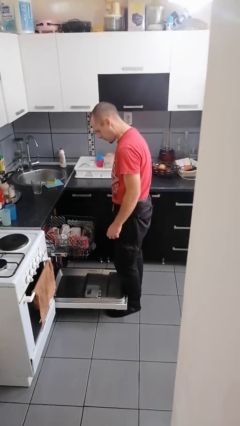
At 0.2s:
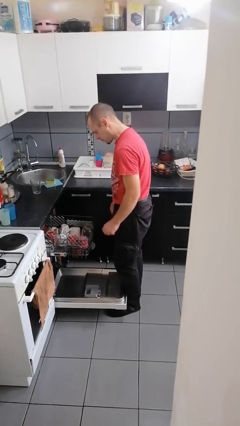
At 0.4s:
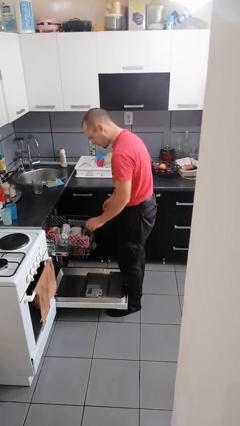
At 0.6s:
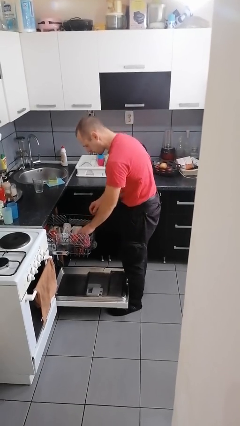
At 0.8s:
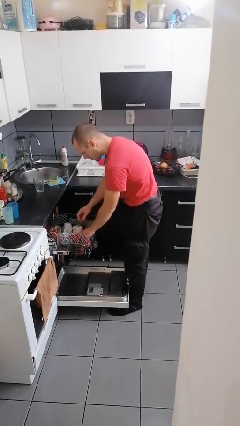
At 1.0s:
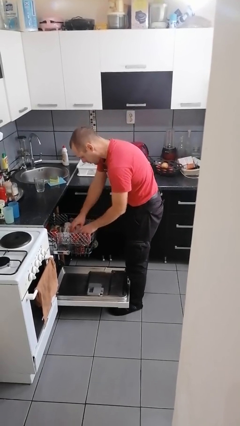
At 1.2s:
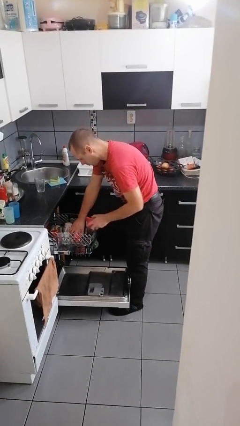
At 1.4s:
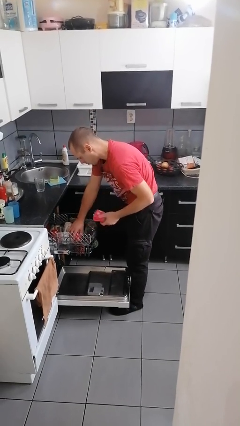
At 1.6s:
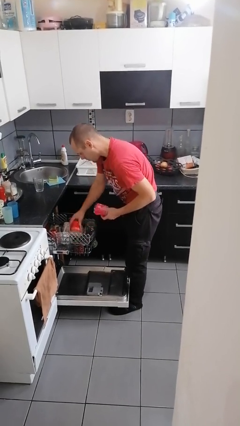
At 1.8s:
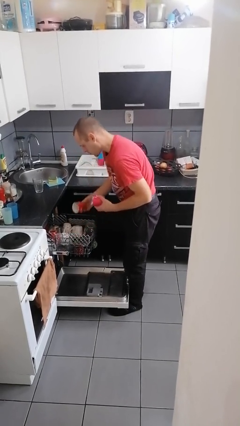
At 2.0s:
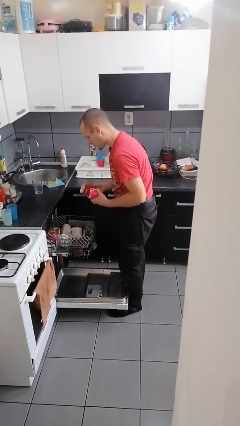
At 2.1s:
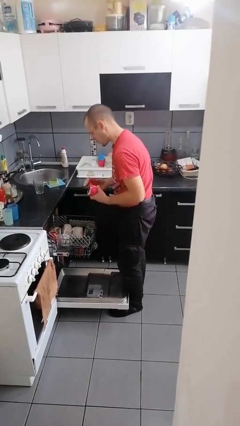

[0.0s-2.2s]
person unloads dishwasher

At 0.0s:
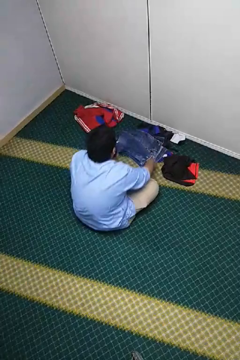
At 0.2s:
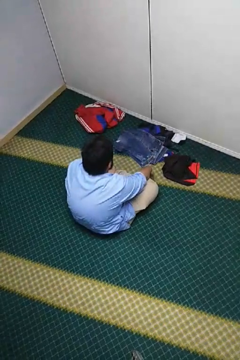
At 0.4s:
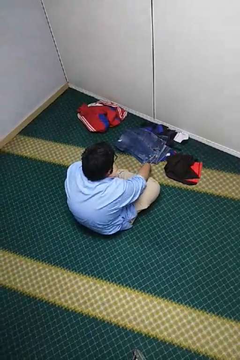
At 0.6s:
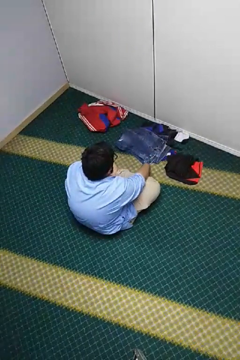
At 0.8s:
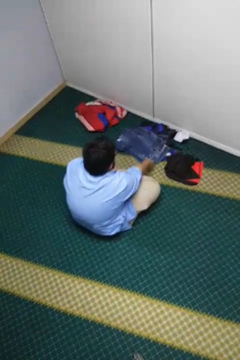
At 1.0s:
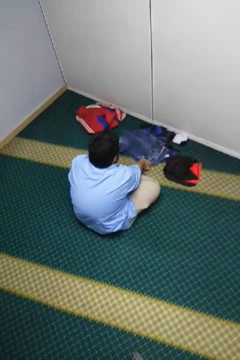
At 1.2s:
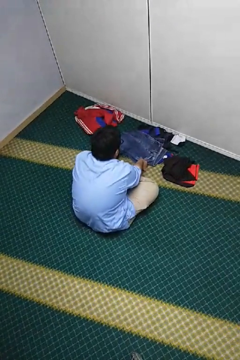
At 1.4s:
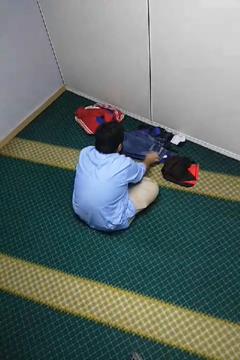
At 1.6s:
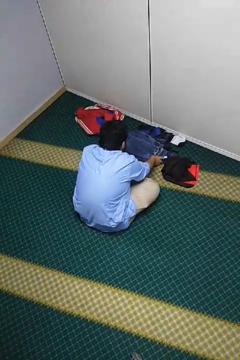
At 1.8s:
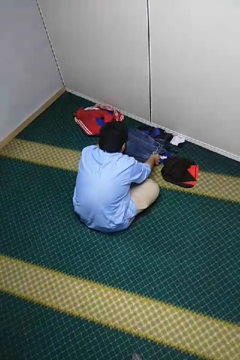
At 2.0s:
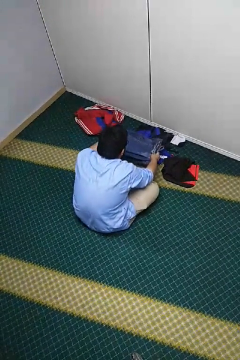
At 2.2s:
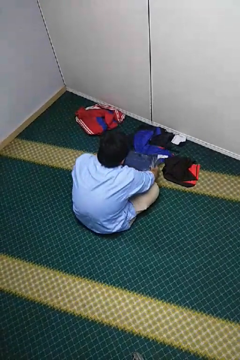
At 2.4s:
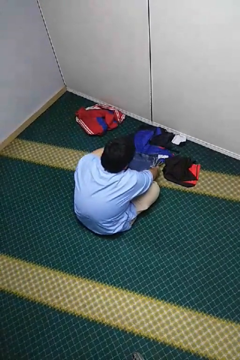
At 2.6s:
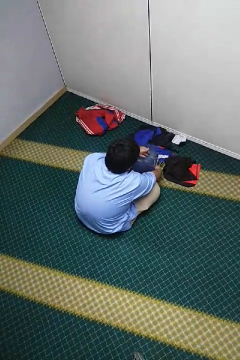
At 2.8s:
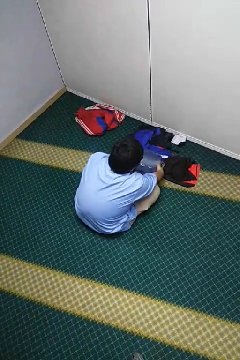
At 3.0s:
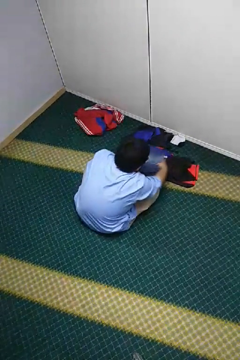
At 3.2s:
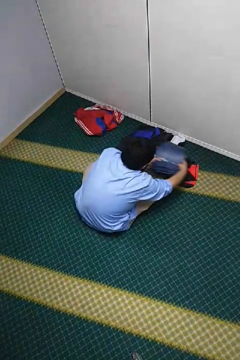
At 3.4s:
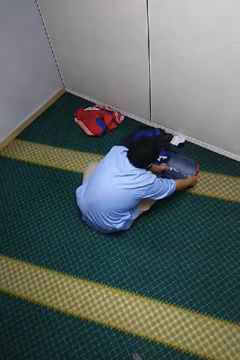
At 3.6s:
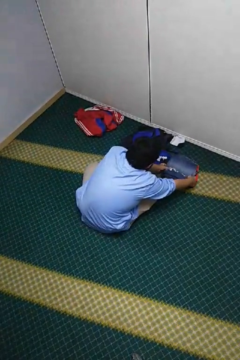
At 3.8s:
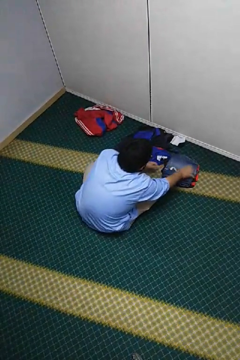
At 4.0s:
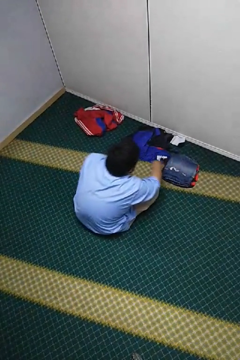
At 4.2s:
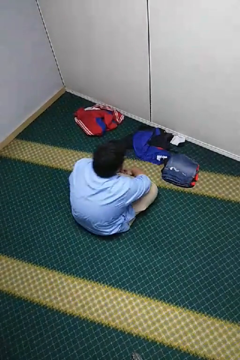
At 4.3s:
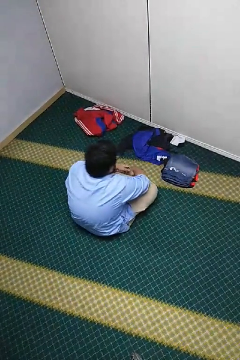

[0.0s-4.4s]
person folds pants

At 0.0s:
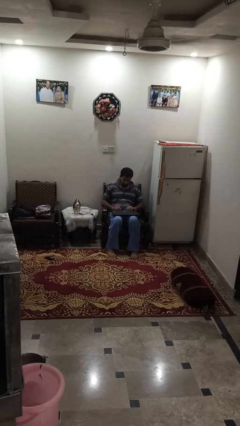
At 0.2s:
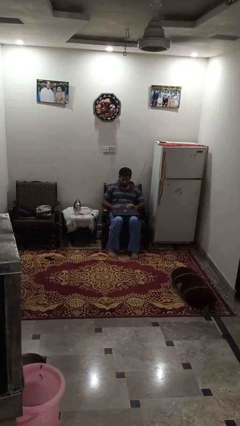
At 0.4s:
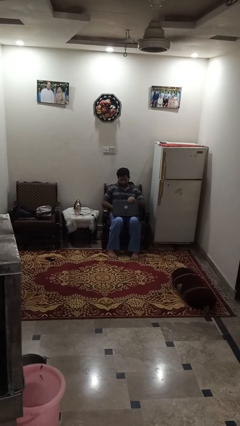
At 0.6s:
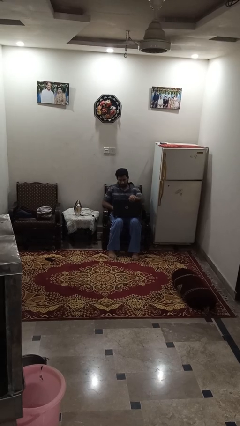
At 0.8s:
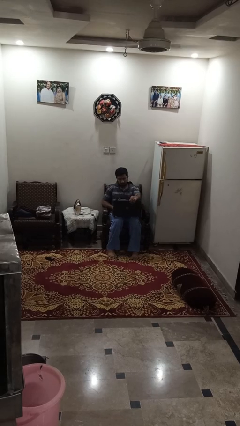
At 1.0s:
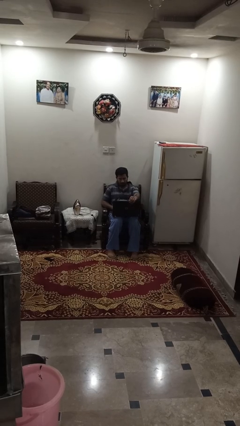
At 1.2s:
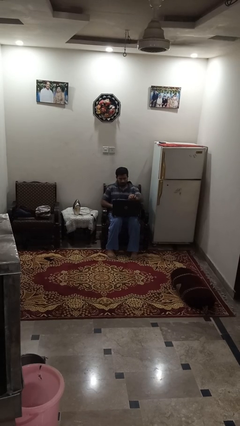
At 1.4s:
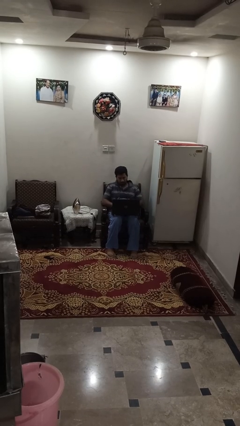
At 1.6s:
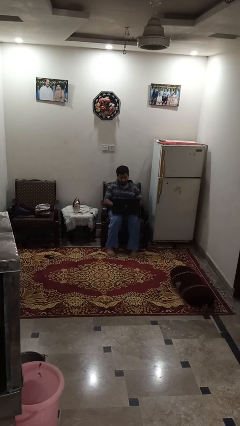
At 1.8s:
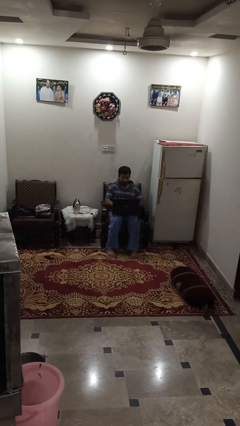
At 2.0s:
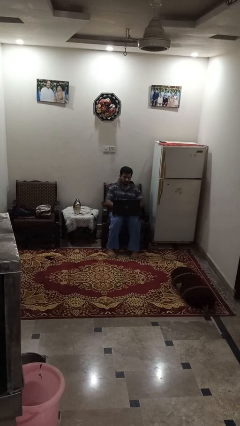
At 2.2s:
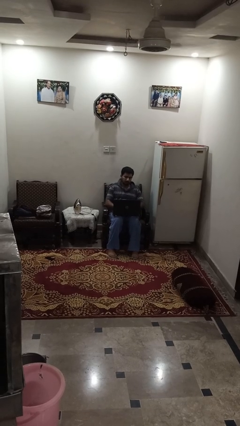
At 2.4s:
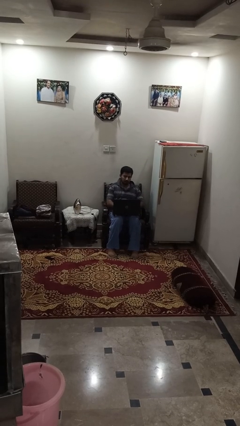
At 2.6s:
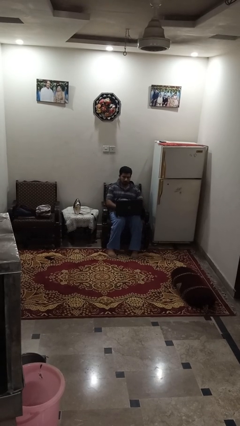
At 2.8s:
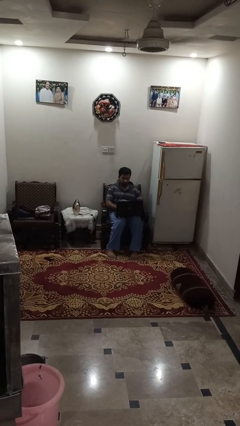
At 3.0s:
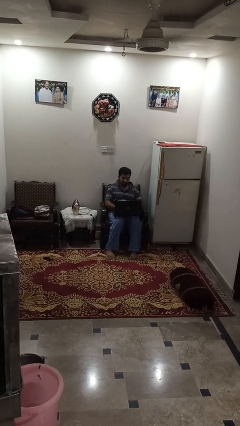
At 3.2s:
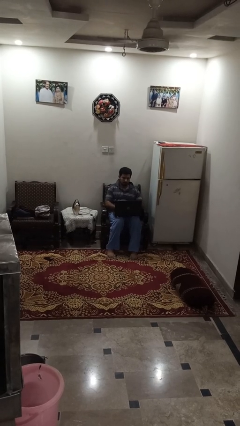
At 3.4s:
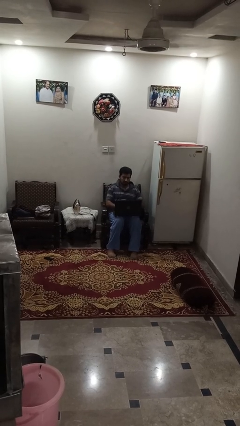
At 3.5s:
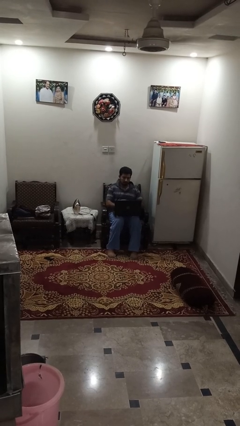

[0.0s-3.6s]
person opens laptop

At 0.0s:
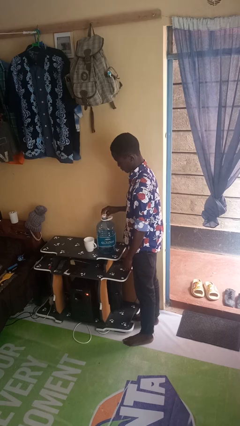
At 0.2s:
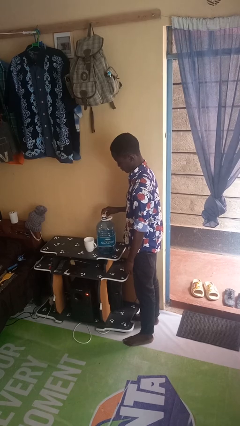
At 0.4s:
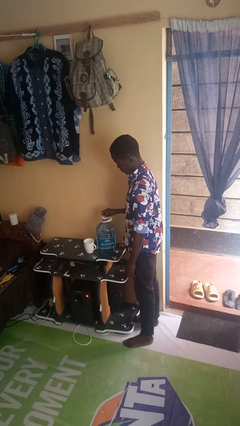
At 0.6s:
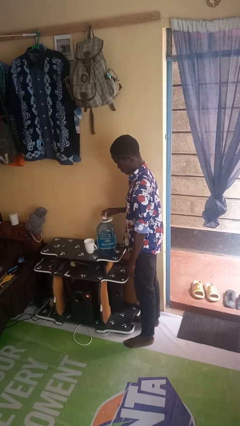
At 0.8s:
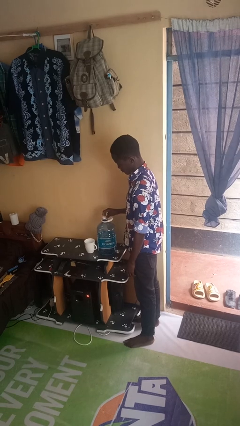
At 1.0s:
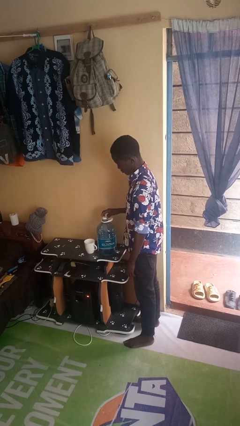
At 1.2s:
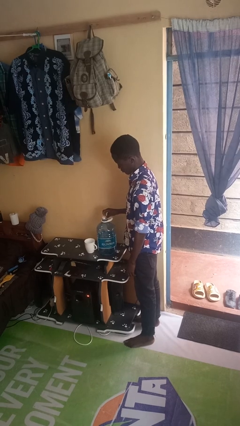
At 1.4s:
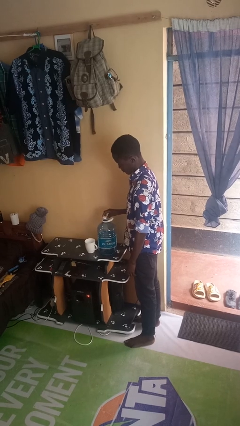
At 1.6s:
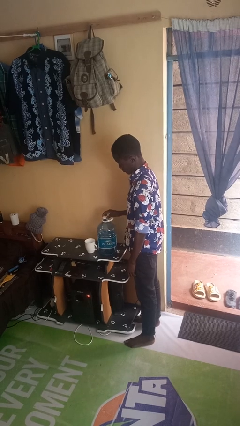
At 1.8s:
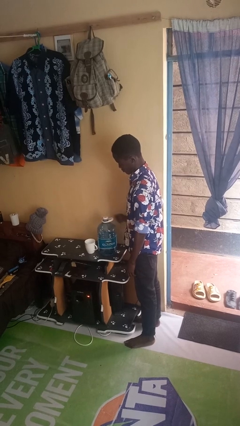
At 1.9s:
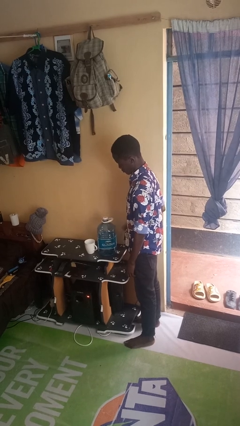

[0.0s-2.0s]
person screws lid to bottle

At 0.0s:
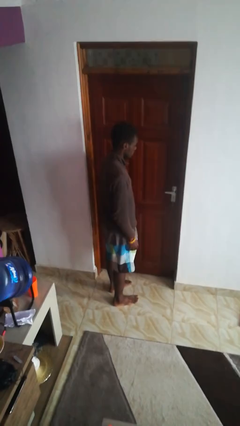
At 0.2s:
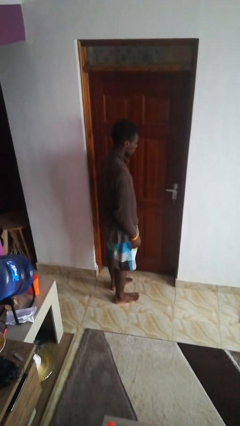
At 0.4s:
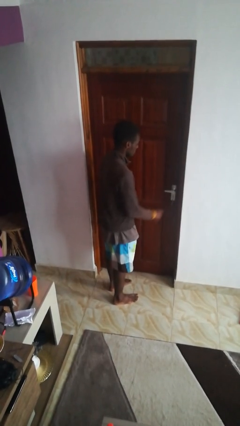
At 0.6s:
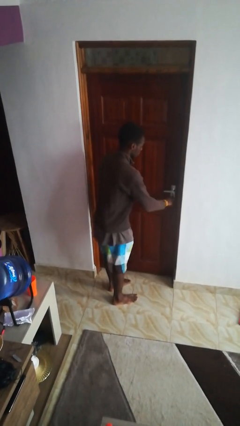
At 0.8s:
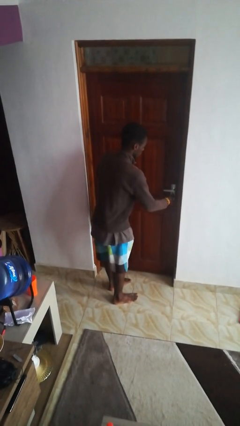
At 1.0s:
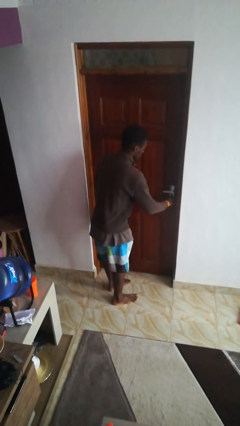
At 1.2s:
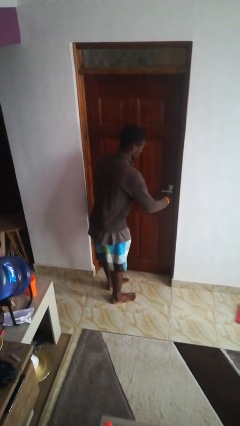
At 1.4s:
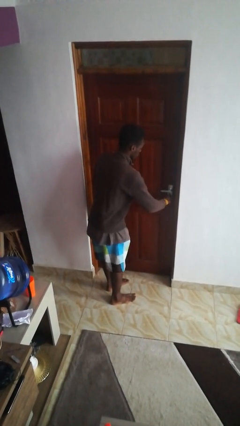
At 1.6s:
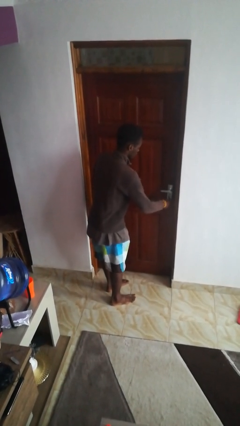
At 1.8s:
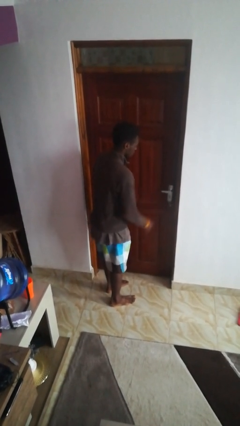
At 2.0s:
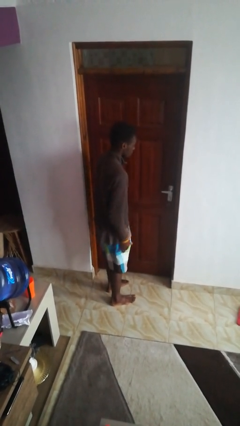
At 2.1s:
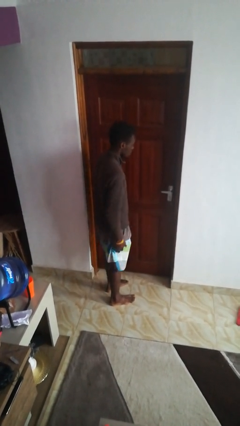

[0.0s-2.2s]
person locks door with keys

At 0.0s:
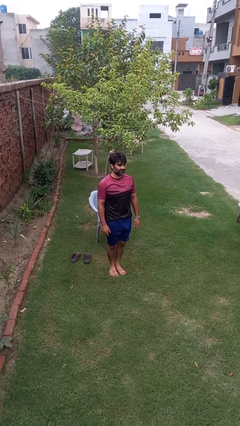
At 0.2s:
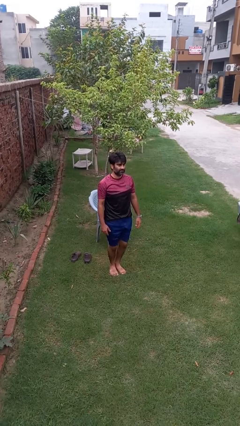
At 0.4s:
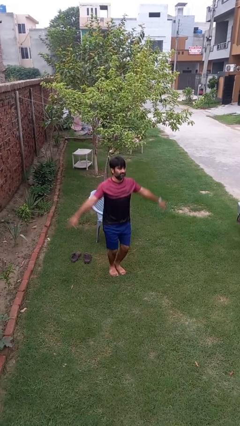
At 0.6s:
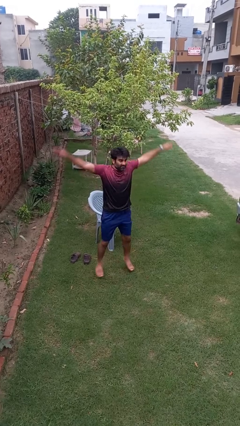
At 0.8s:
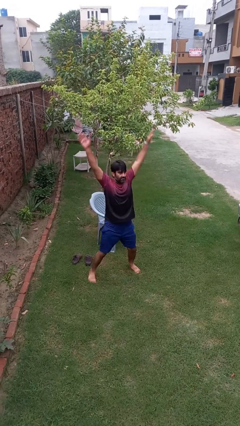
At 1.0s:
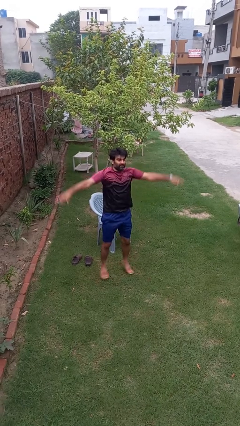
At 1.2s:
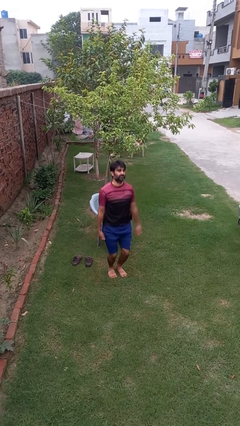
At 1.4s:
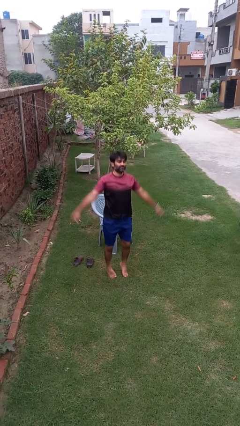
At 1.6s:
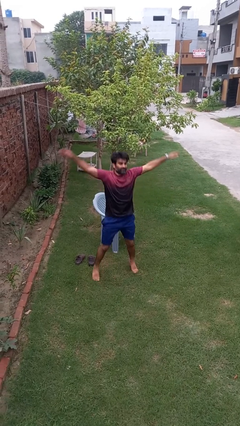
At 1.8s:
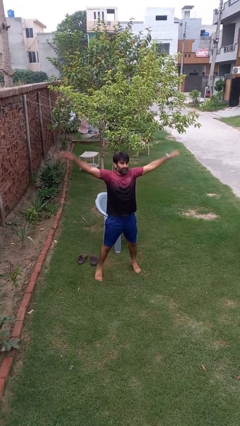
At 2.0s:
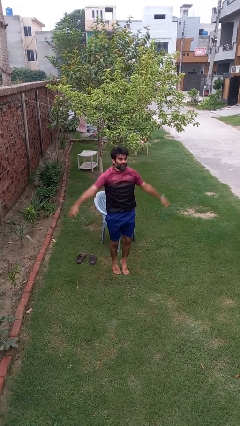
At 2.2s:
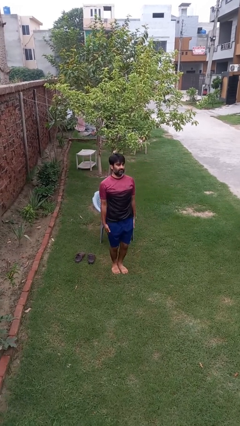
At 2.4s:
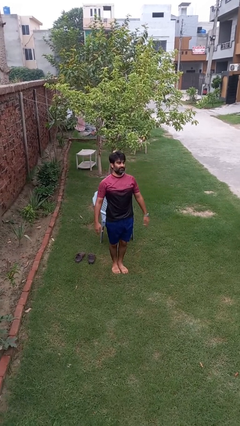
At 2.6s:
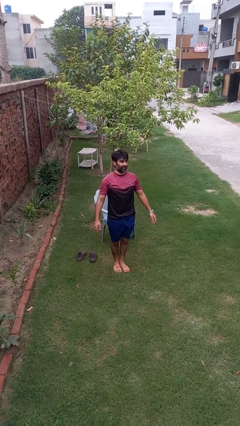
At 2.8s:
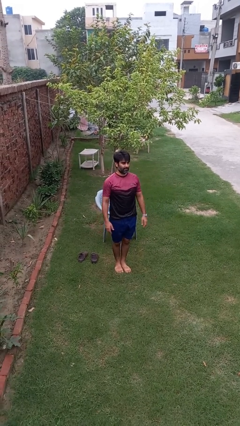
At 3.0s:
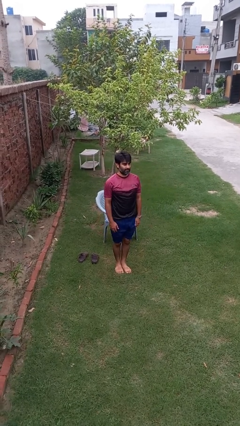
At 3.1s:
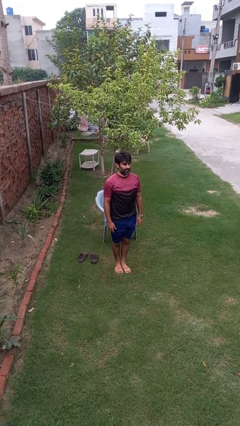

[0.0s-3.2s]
person exercises with jumping jacks

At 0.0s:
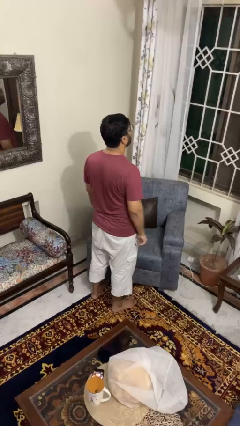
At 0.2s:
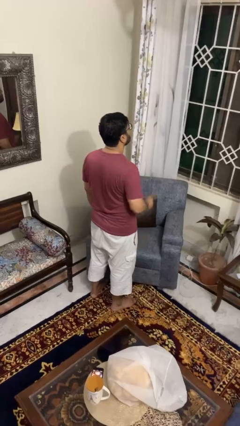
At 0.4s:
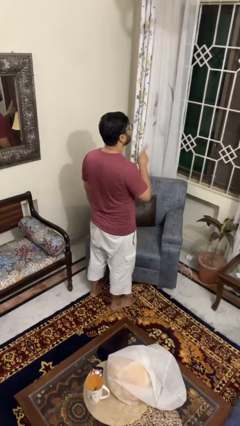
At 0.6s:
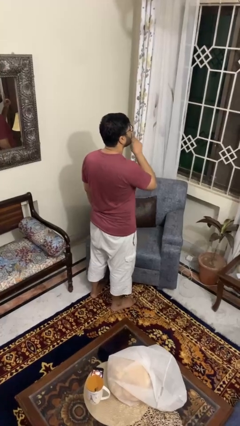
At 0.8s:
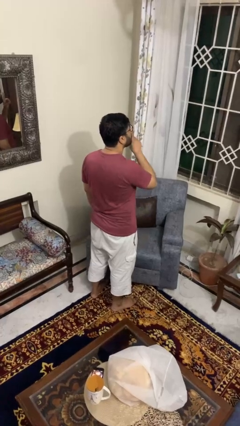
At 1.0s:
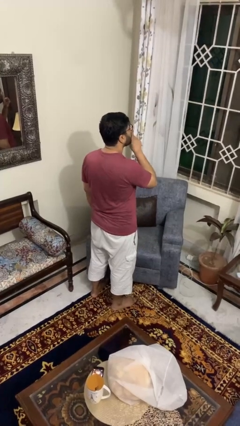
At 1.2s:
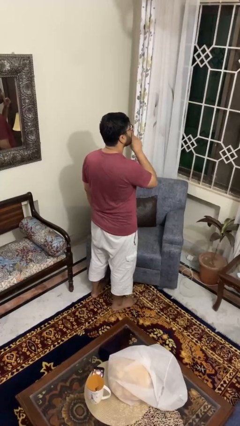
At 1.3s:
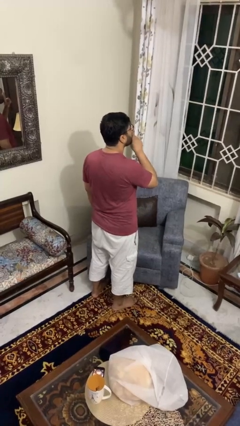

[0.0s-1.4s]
person gestures be quiet
